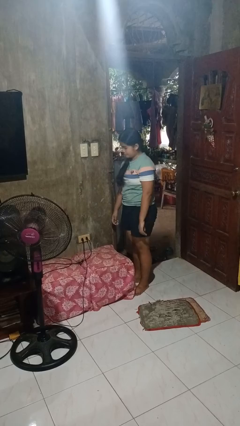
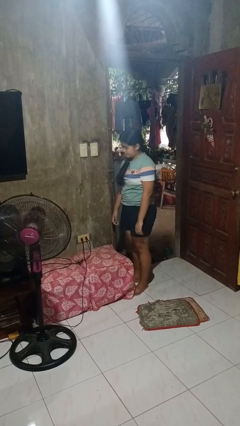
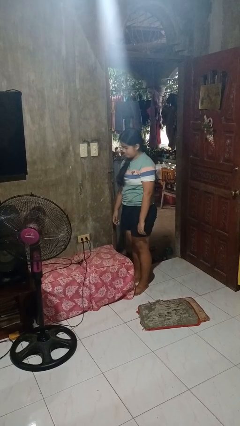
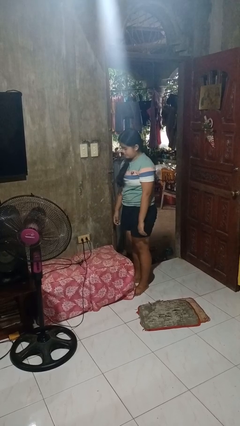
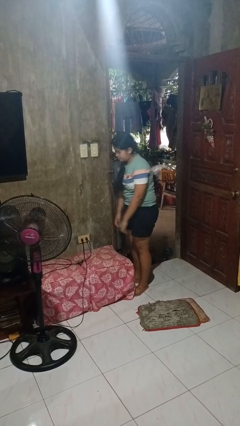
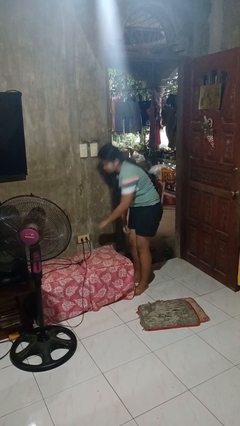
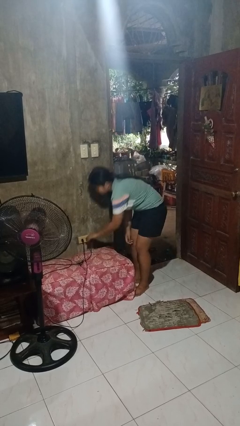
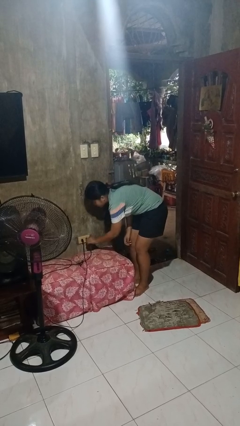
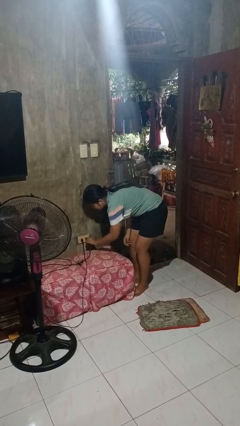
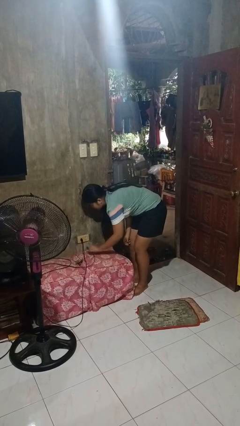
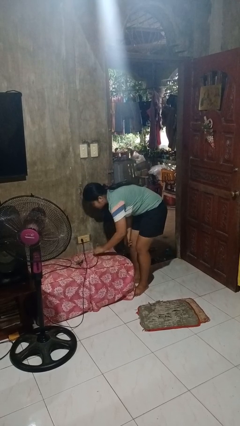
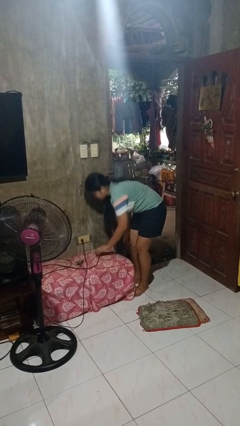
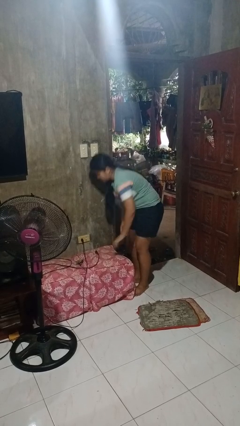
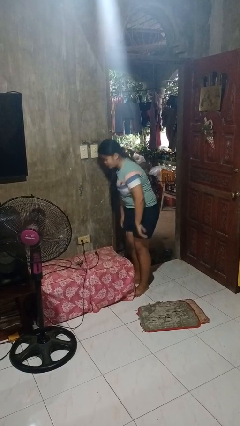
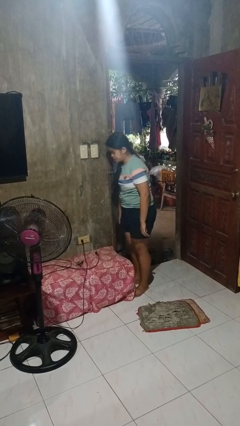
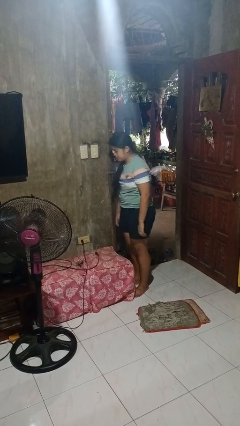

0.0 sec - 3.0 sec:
person unplugs from electrical socket

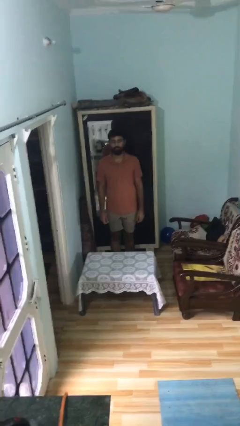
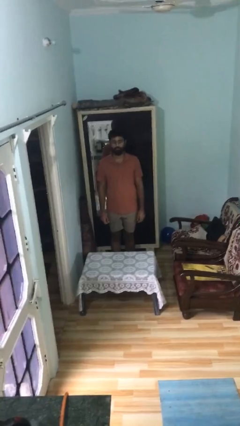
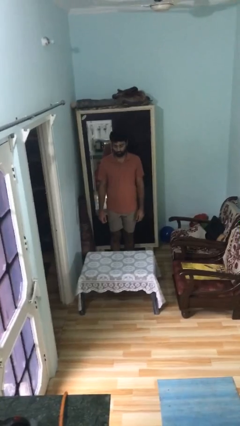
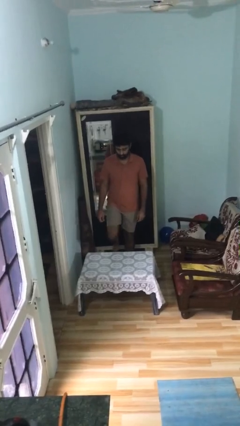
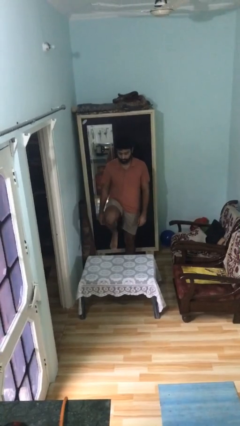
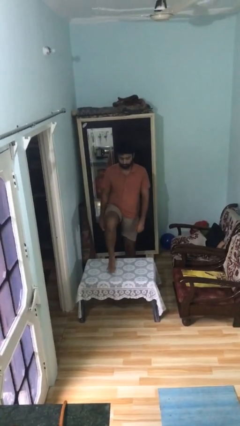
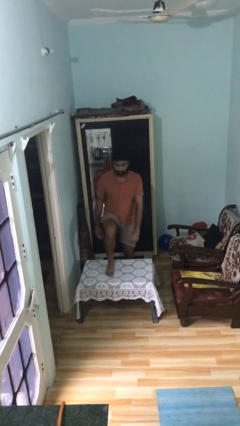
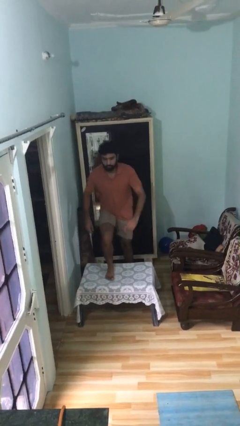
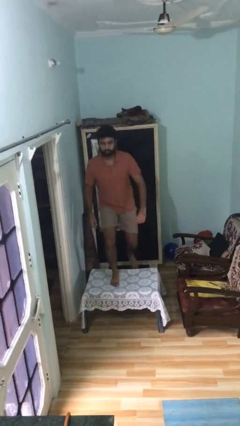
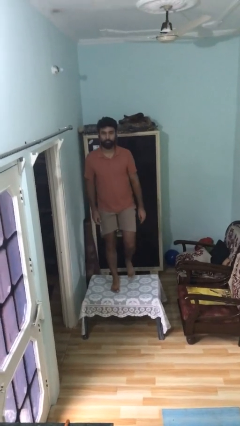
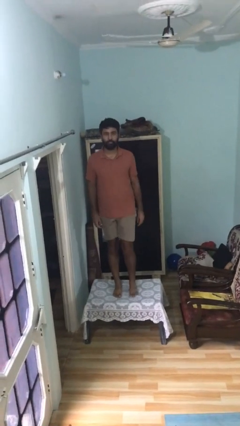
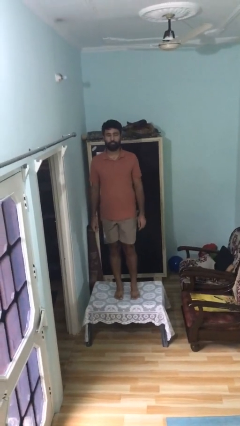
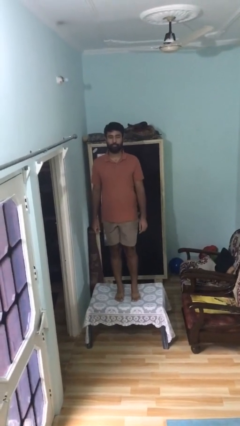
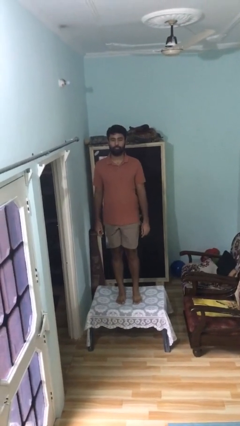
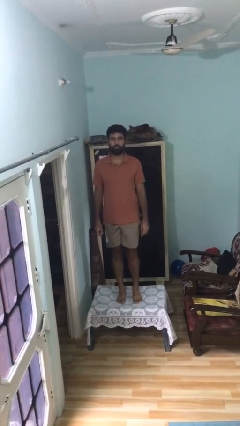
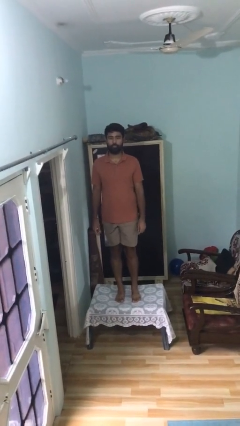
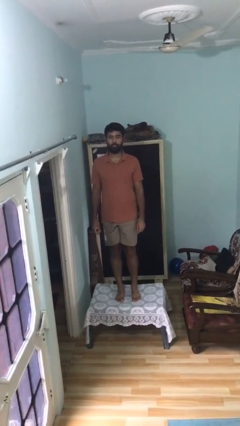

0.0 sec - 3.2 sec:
person climbs on table

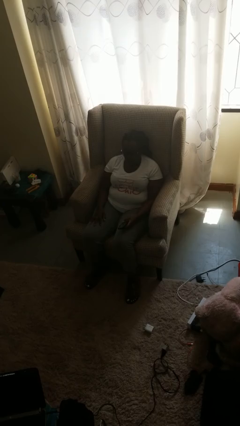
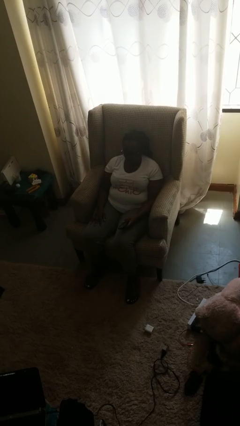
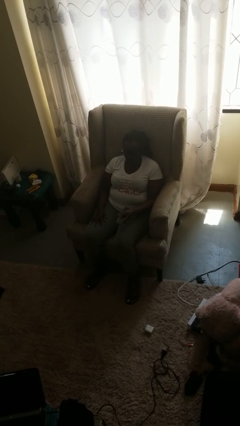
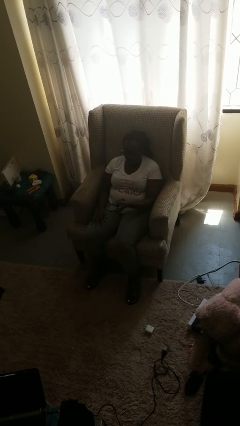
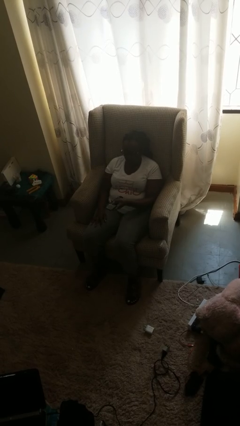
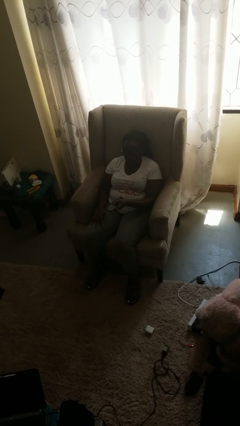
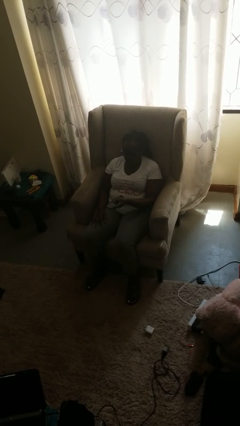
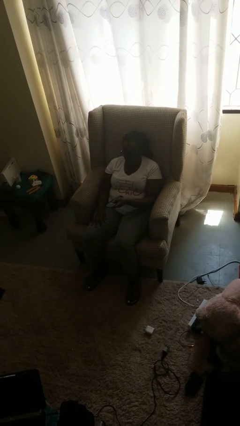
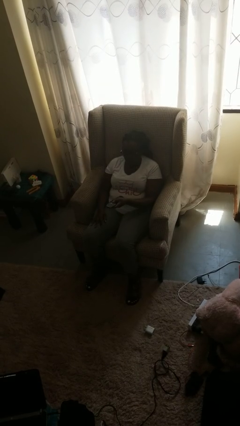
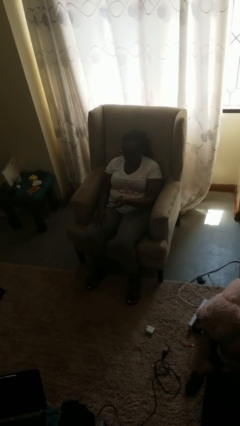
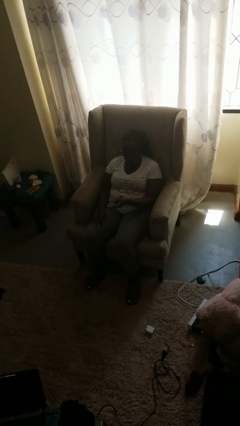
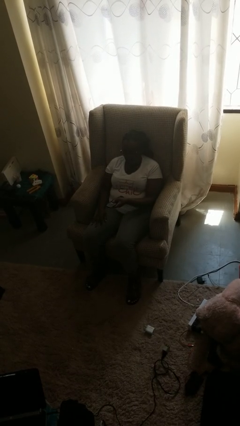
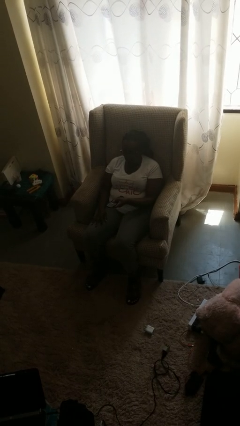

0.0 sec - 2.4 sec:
person uses television remote

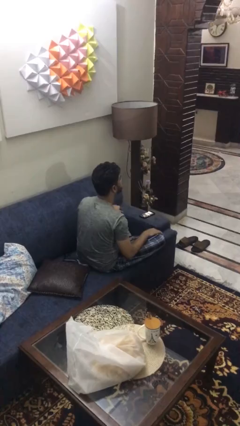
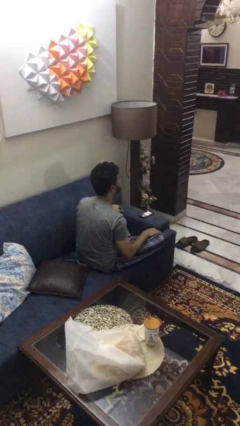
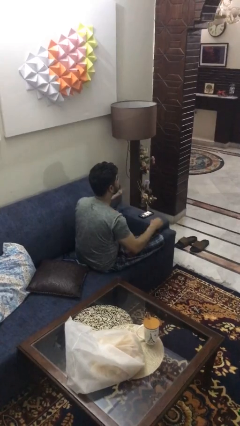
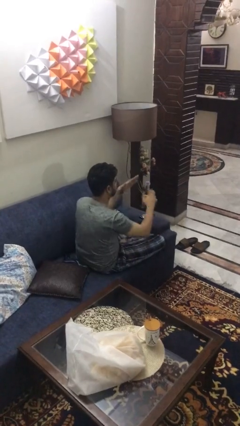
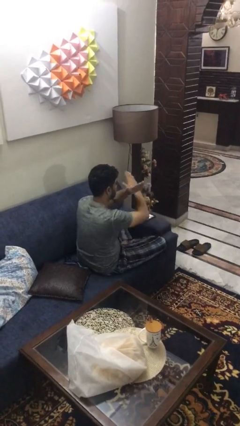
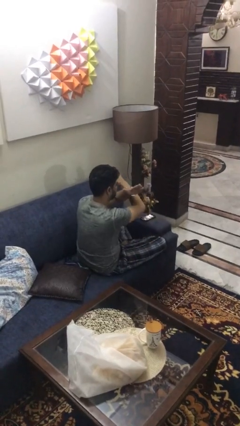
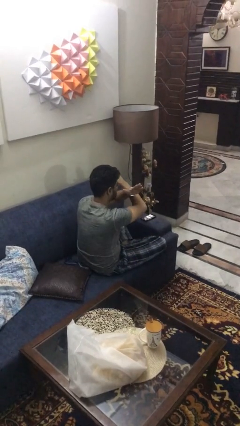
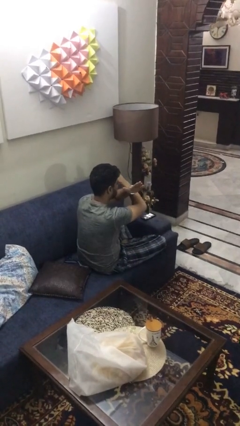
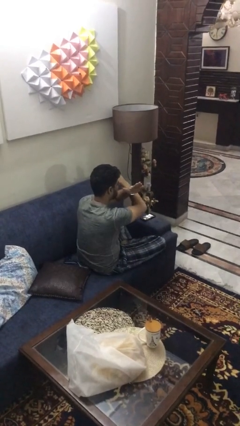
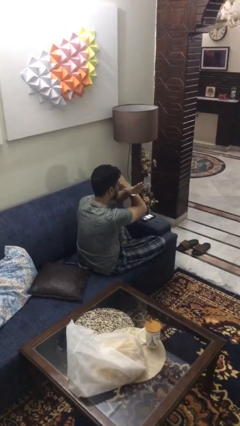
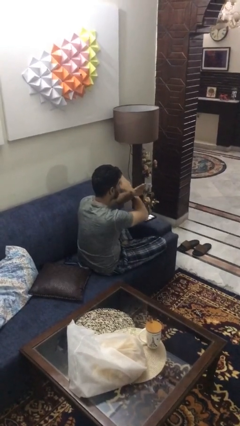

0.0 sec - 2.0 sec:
person gestures arms x

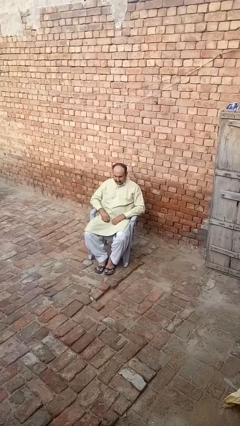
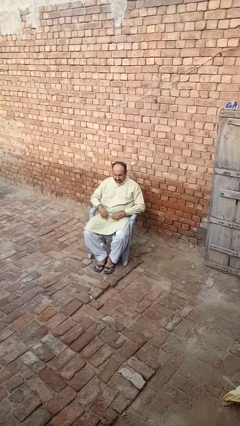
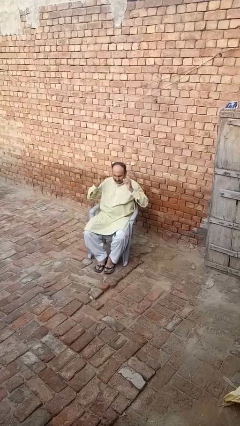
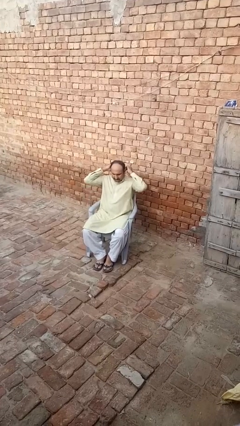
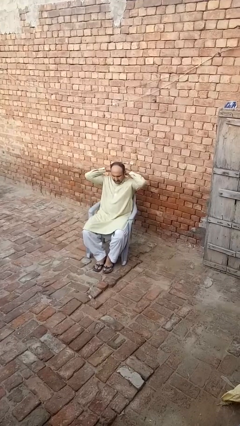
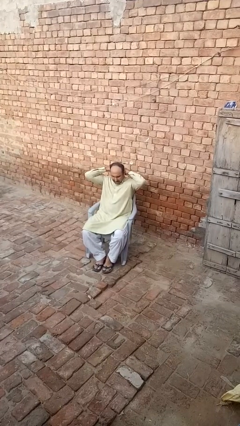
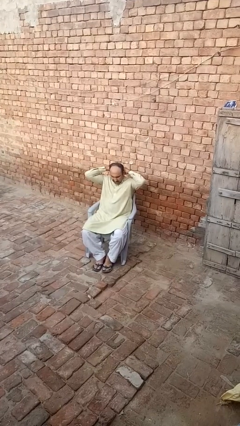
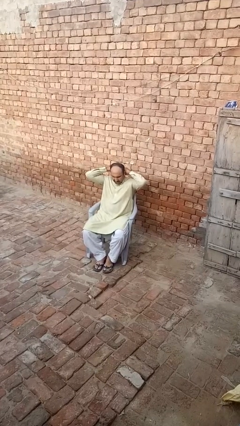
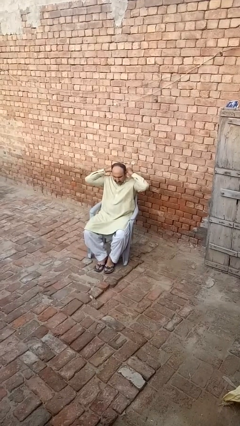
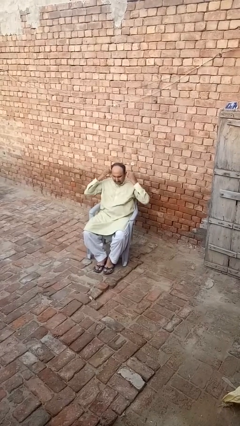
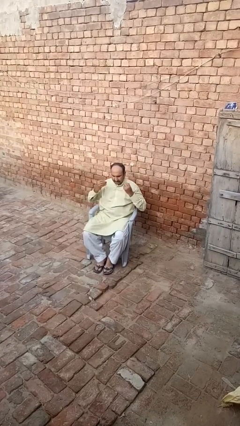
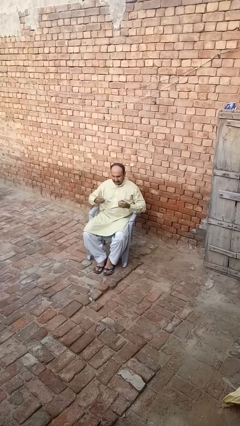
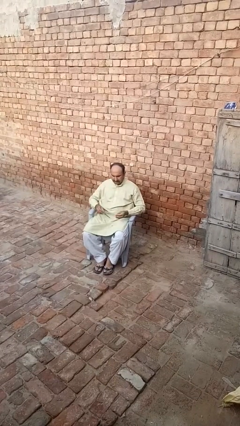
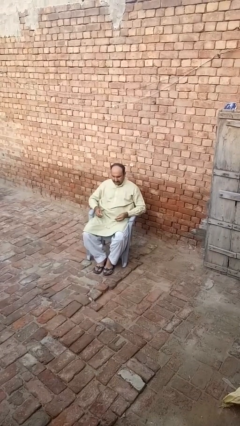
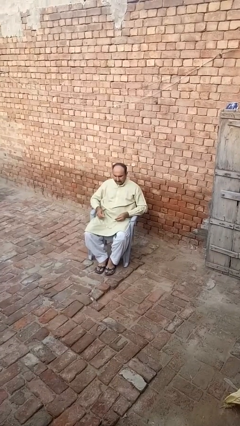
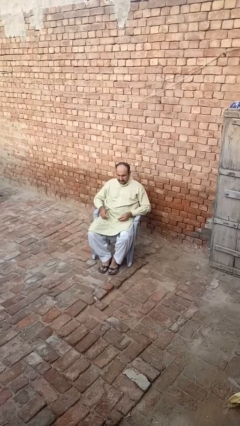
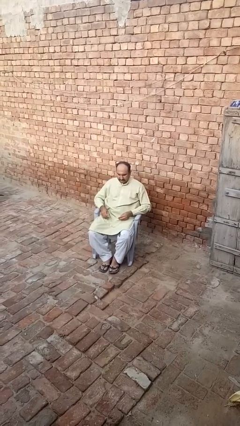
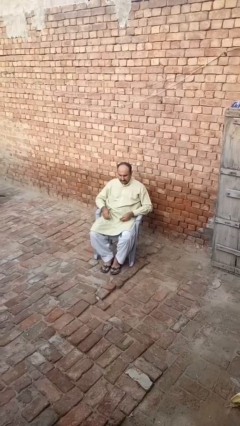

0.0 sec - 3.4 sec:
person takes off necklace

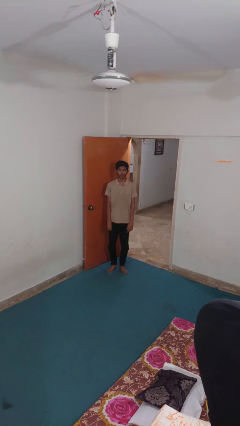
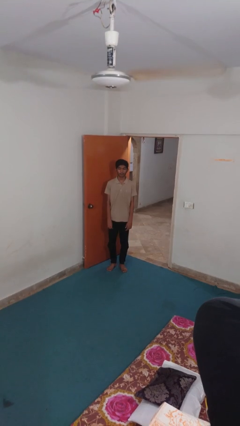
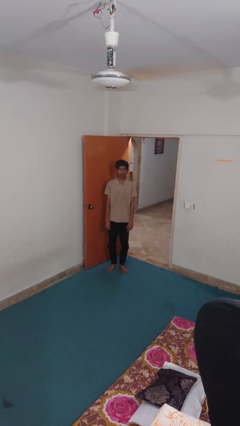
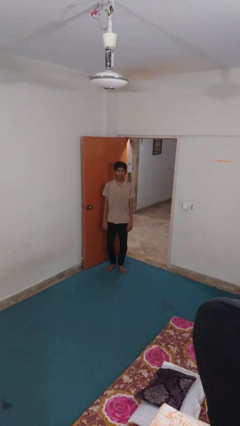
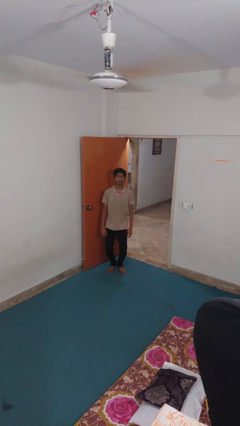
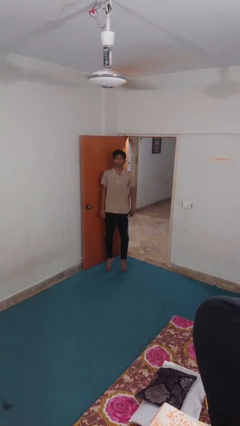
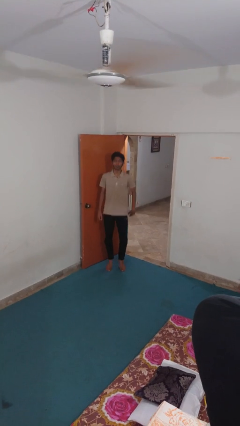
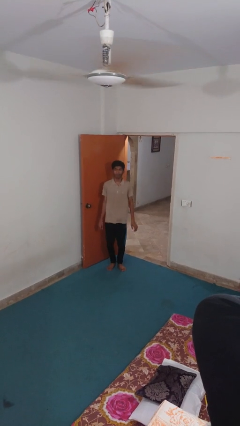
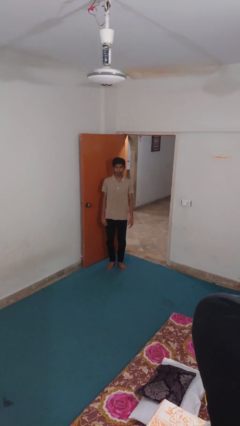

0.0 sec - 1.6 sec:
person jumps

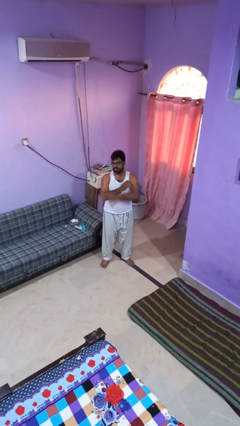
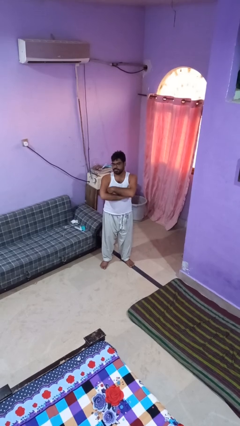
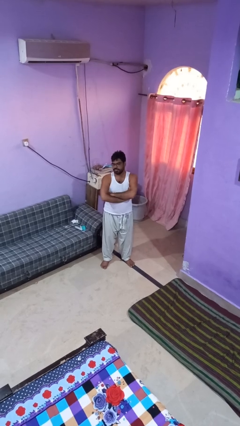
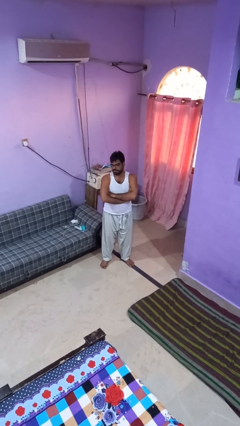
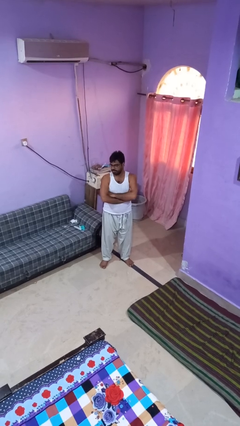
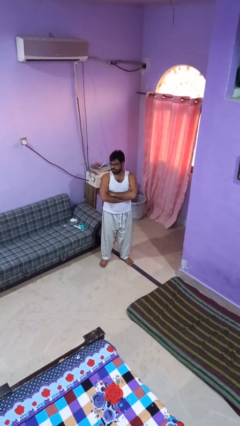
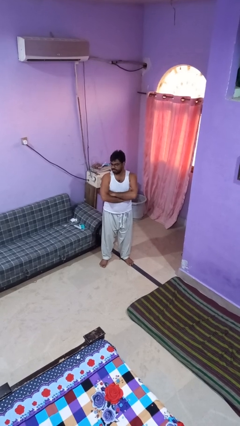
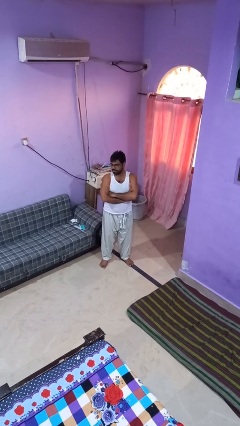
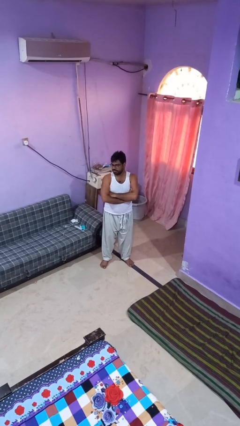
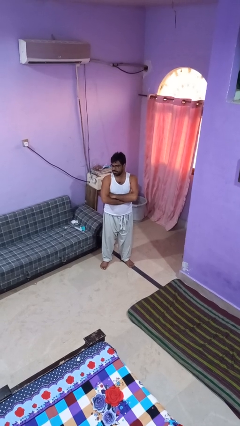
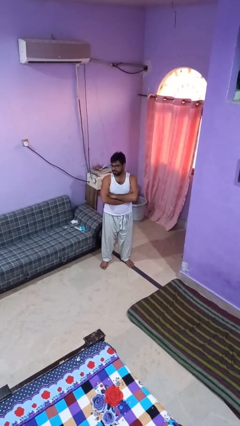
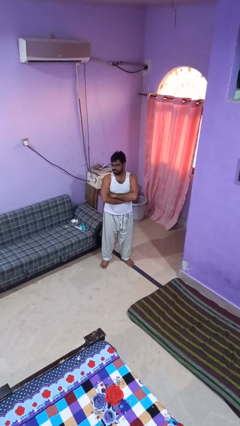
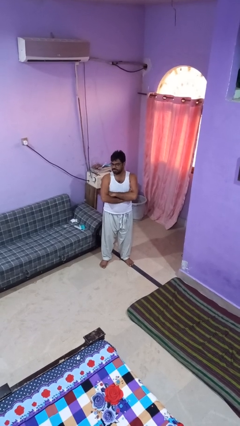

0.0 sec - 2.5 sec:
person crosses arms
